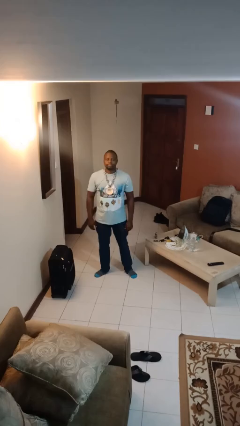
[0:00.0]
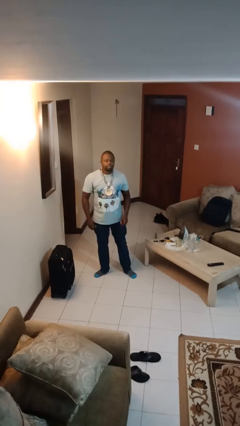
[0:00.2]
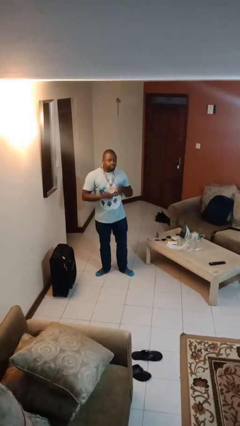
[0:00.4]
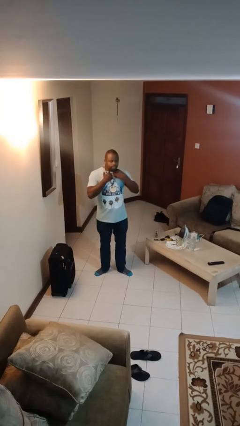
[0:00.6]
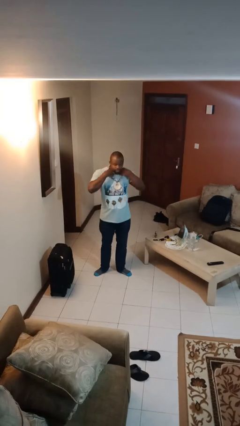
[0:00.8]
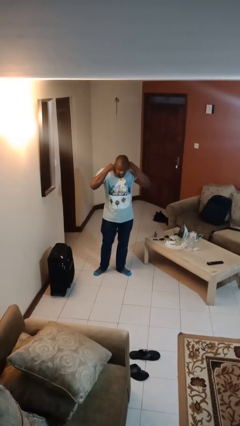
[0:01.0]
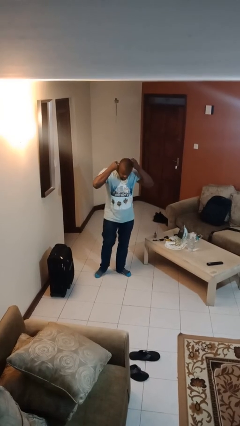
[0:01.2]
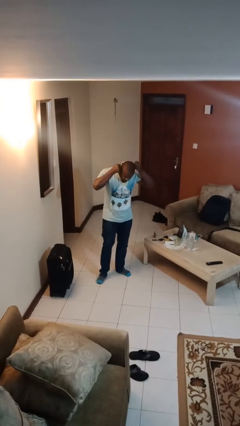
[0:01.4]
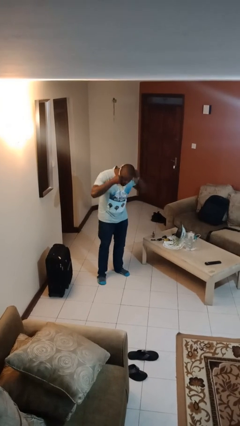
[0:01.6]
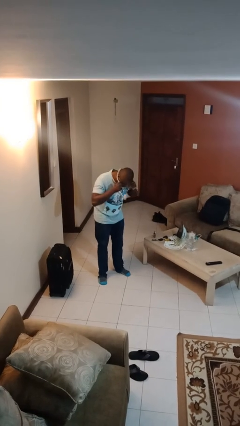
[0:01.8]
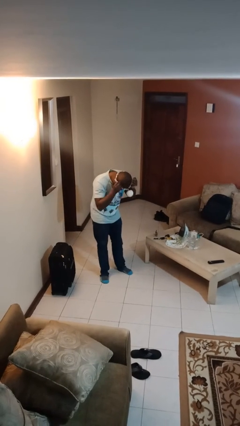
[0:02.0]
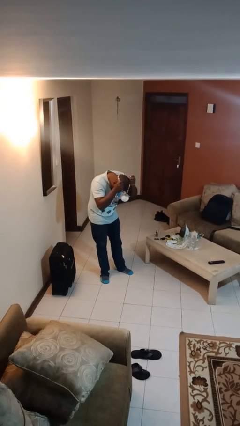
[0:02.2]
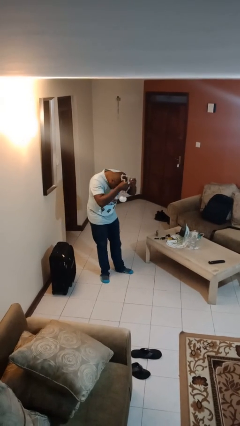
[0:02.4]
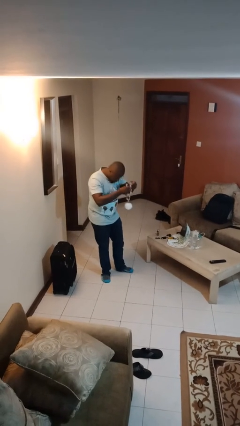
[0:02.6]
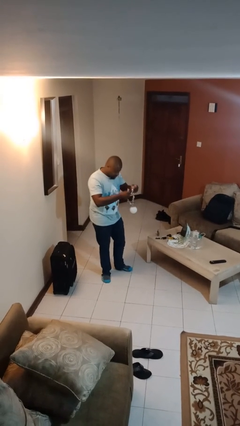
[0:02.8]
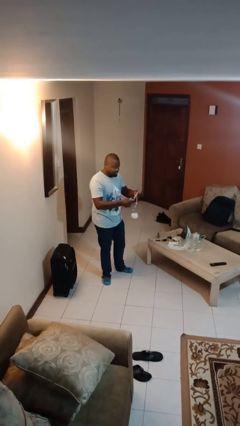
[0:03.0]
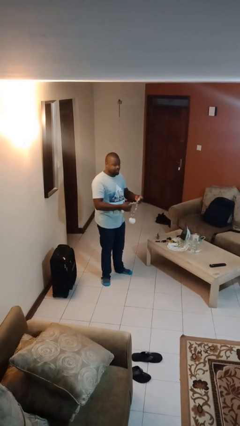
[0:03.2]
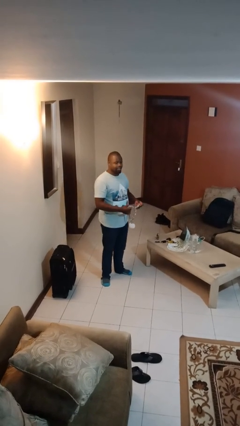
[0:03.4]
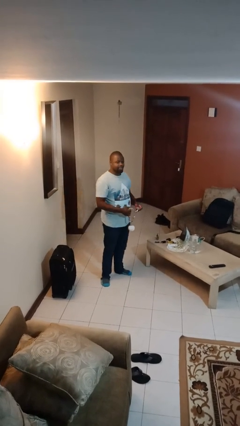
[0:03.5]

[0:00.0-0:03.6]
person takes off necklace

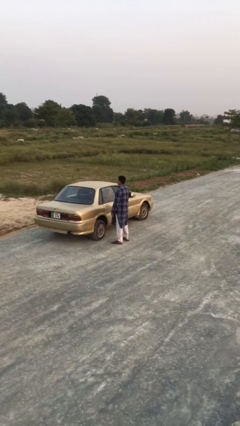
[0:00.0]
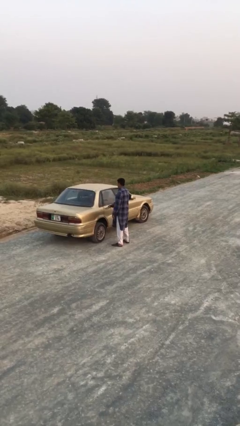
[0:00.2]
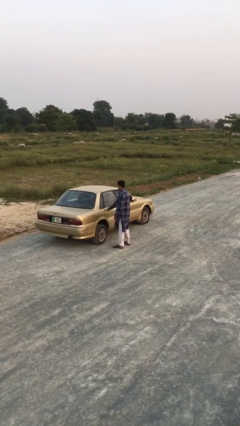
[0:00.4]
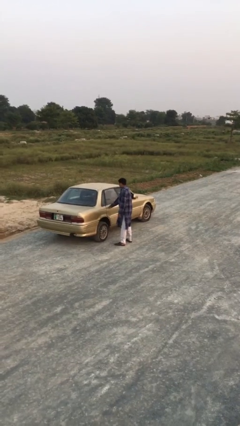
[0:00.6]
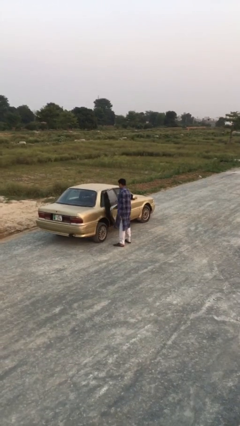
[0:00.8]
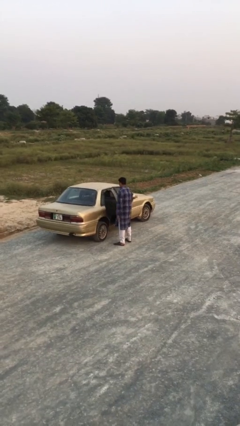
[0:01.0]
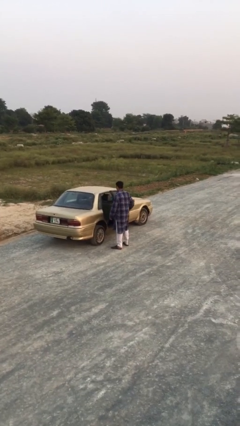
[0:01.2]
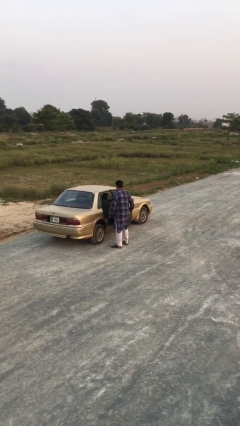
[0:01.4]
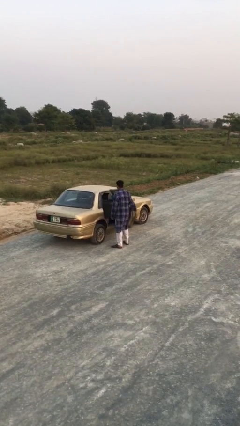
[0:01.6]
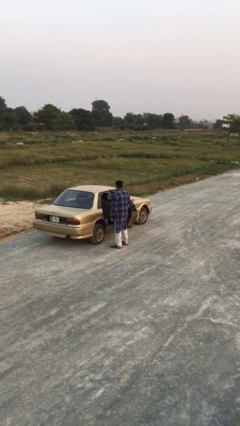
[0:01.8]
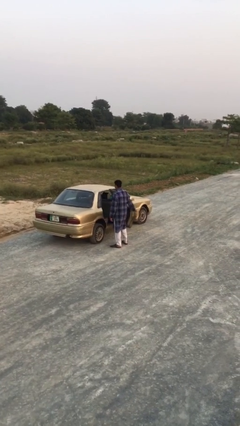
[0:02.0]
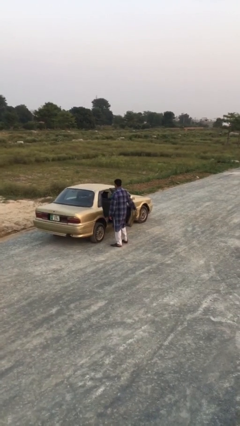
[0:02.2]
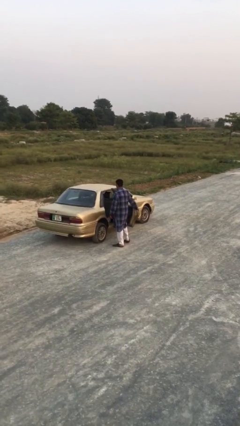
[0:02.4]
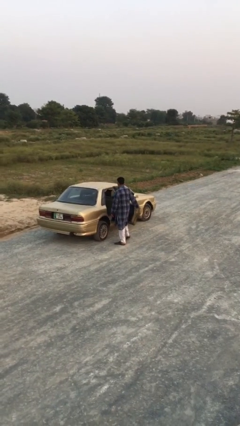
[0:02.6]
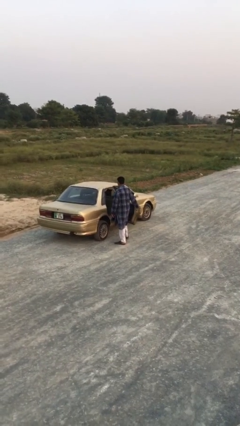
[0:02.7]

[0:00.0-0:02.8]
person opens car door

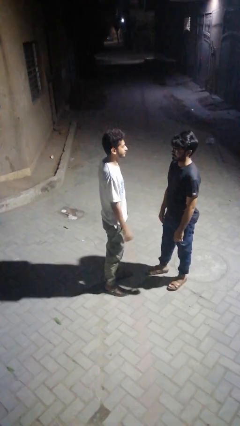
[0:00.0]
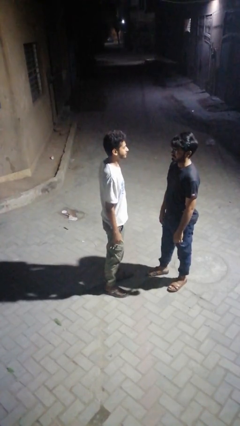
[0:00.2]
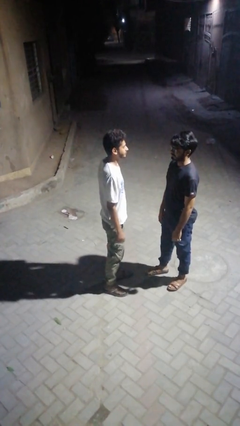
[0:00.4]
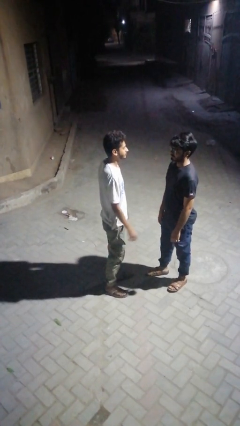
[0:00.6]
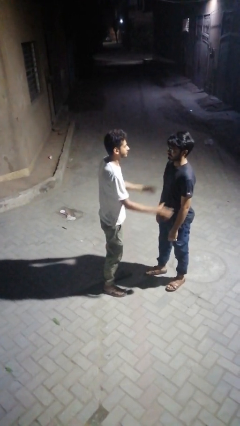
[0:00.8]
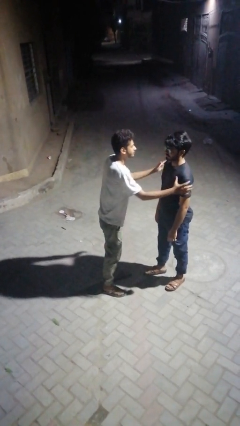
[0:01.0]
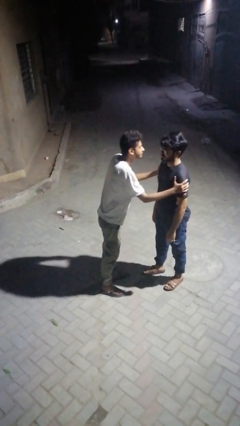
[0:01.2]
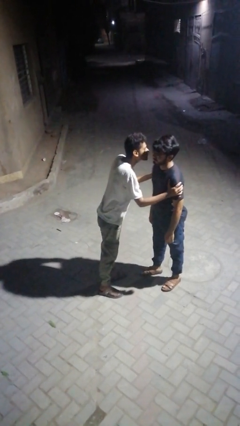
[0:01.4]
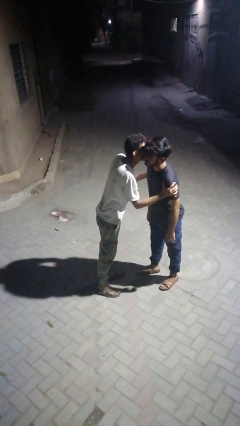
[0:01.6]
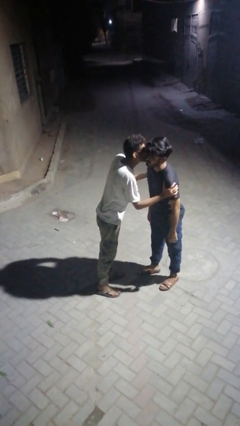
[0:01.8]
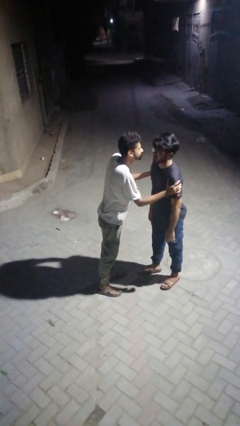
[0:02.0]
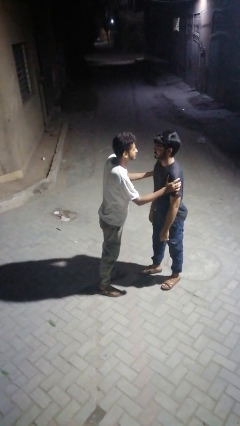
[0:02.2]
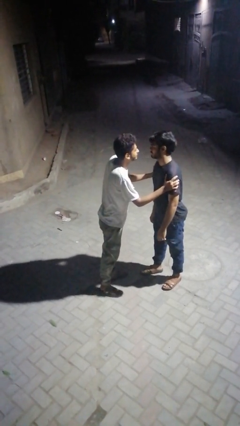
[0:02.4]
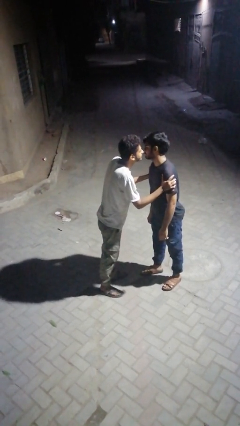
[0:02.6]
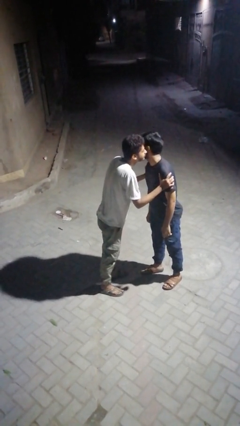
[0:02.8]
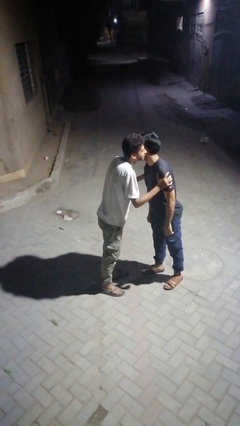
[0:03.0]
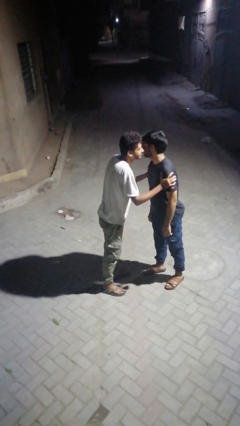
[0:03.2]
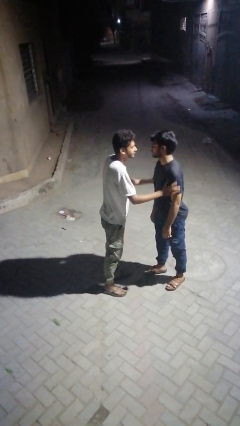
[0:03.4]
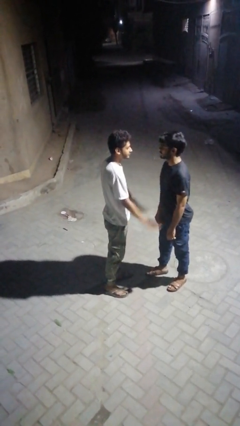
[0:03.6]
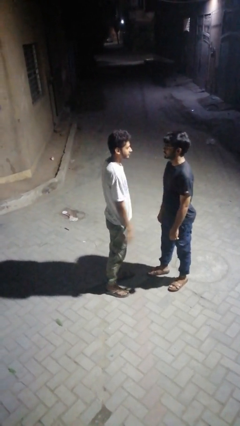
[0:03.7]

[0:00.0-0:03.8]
person kisses cheek of person

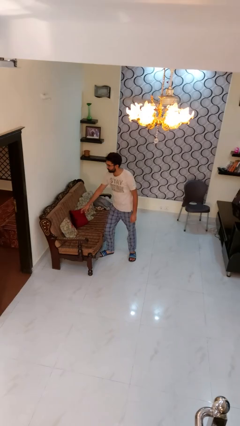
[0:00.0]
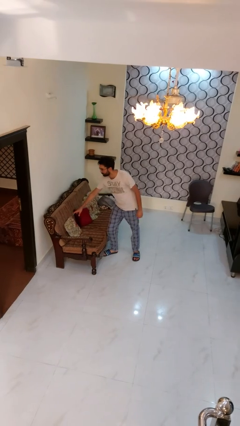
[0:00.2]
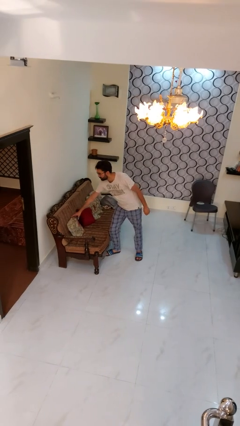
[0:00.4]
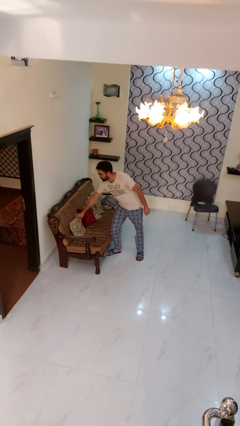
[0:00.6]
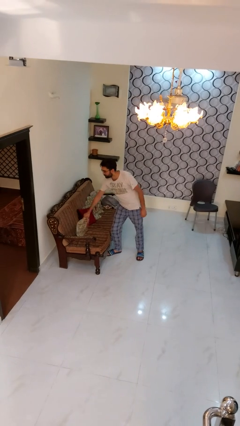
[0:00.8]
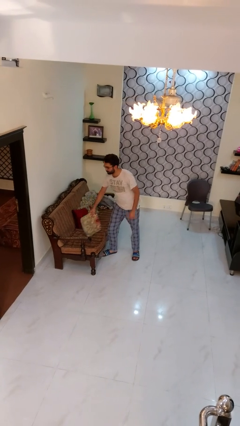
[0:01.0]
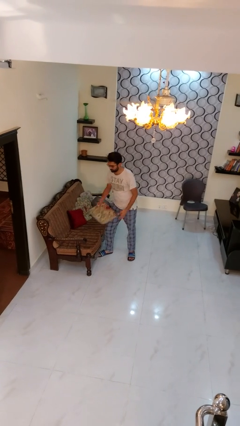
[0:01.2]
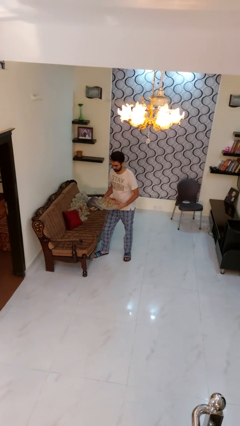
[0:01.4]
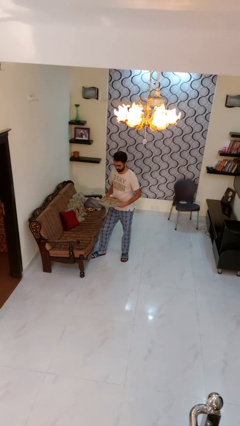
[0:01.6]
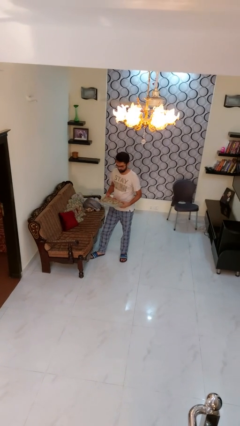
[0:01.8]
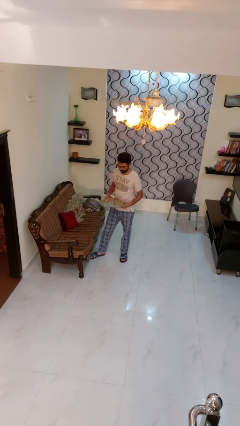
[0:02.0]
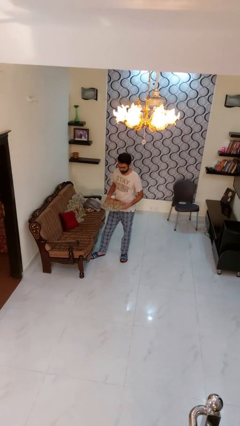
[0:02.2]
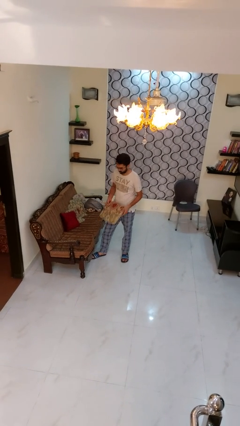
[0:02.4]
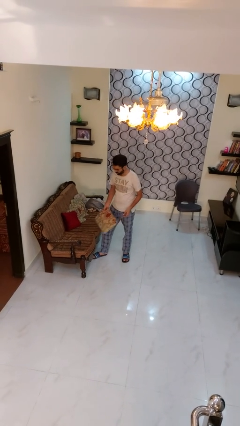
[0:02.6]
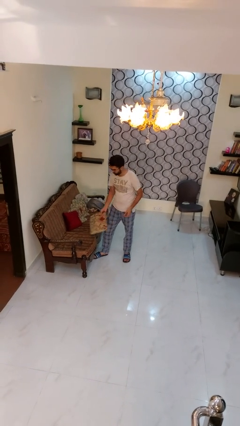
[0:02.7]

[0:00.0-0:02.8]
person picks up object from couch

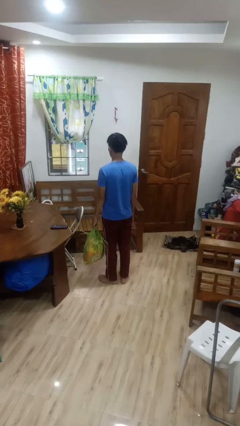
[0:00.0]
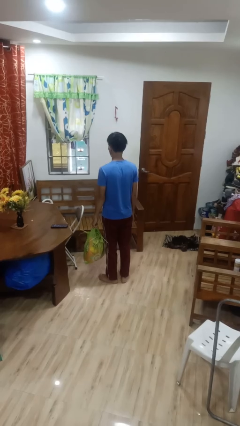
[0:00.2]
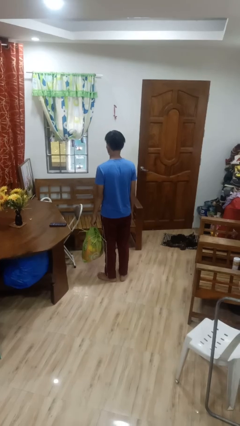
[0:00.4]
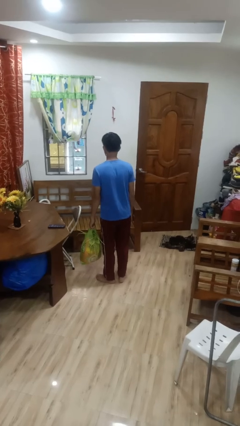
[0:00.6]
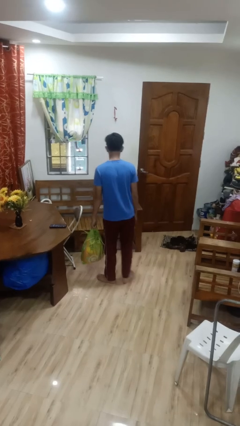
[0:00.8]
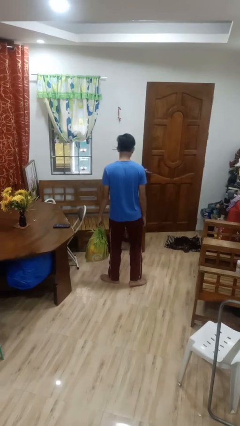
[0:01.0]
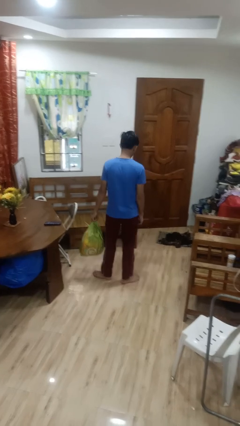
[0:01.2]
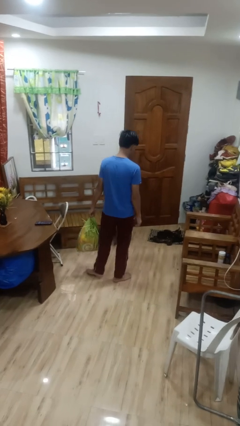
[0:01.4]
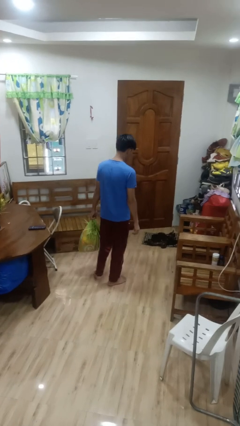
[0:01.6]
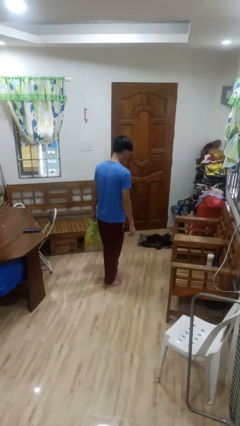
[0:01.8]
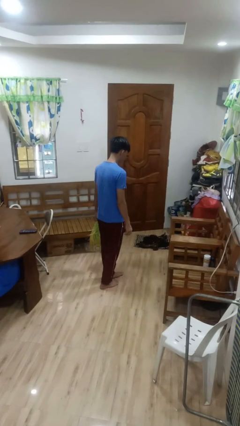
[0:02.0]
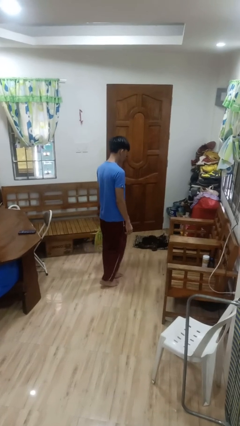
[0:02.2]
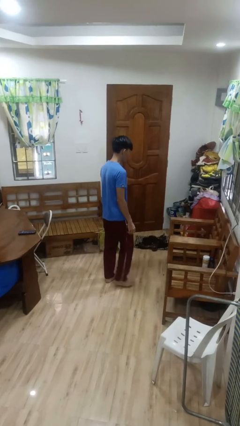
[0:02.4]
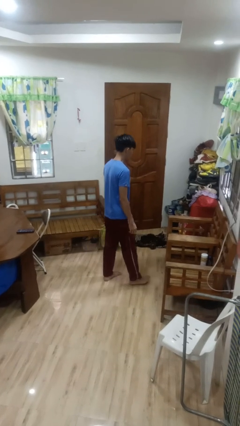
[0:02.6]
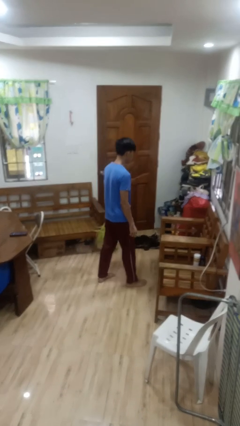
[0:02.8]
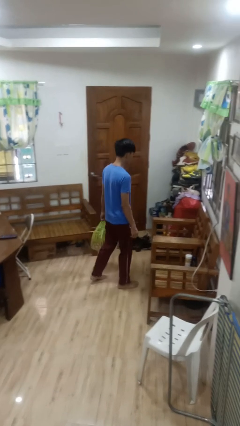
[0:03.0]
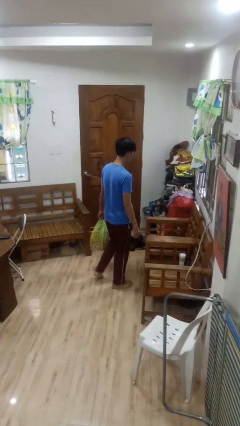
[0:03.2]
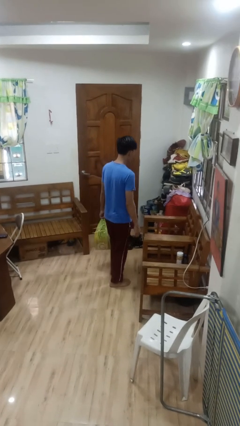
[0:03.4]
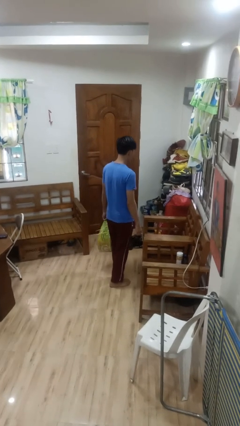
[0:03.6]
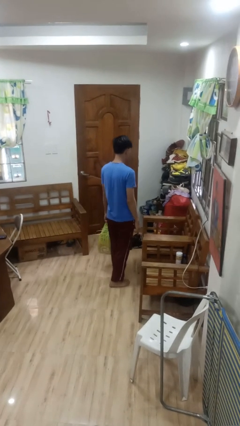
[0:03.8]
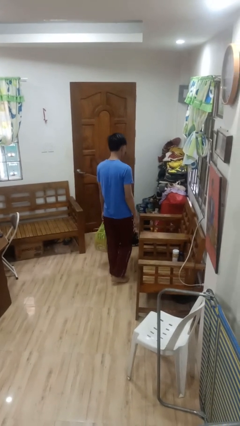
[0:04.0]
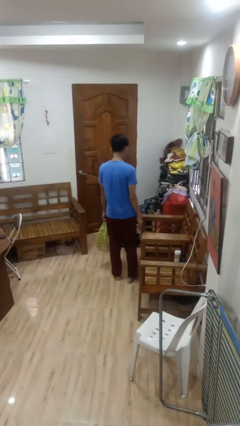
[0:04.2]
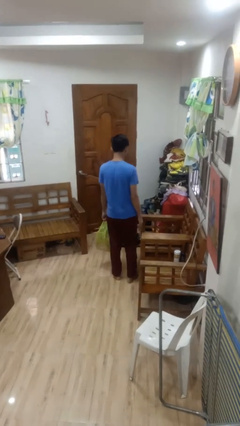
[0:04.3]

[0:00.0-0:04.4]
person carries groceries

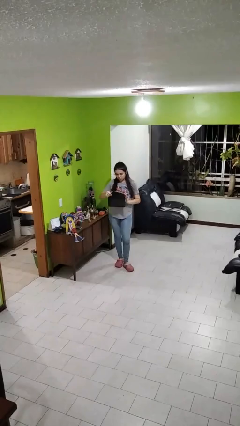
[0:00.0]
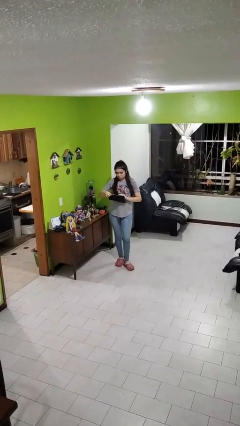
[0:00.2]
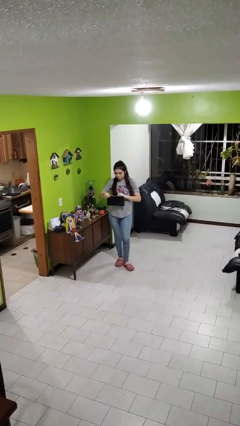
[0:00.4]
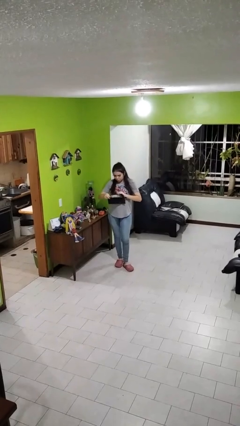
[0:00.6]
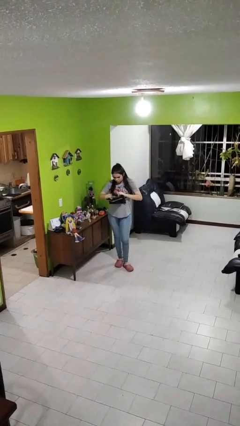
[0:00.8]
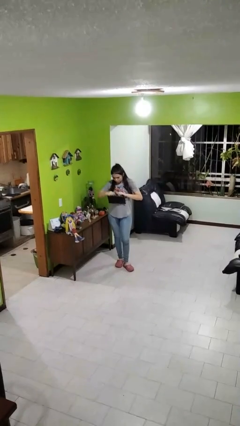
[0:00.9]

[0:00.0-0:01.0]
person searches in purse
